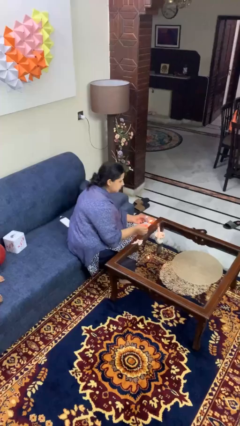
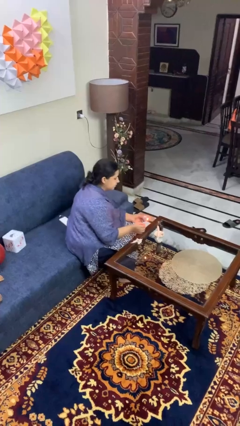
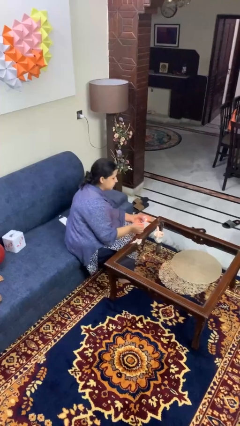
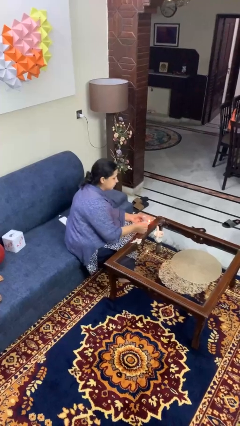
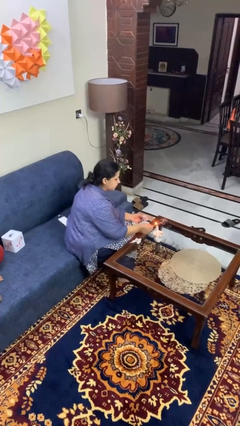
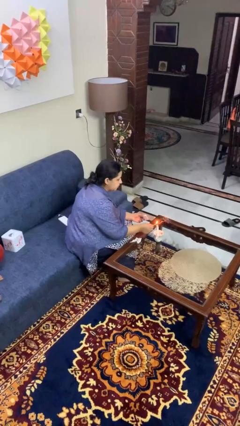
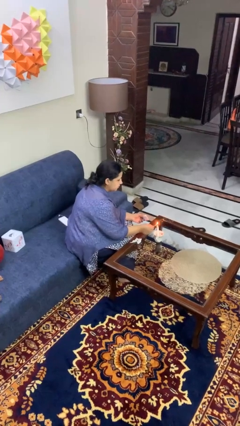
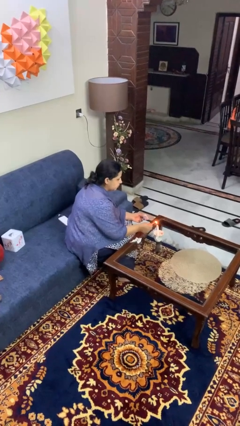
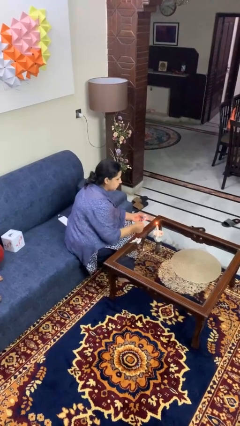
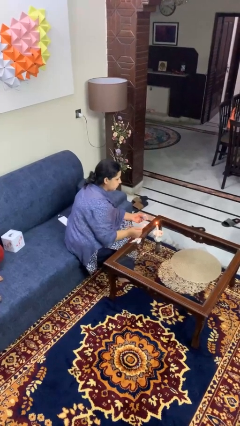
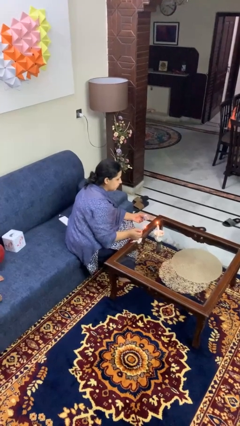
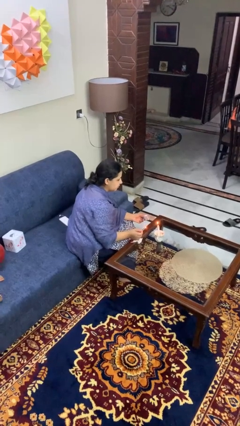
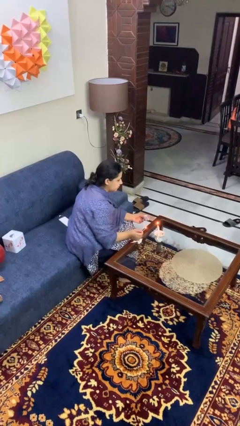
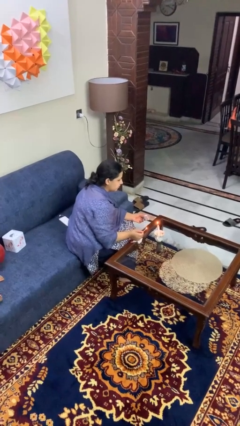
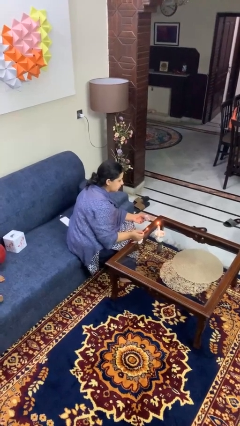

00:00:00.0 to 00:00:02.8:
person lights candle

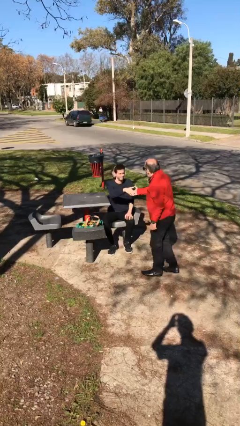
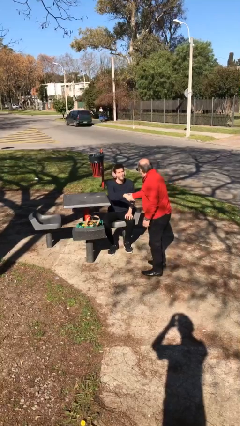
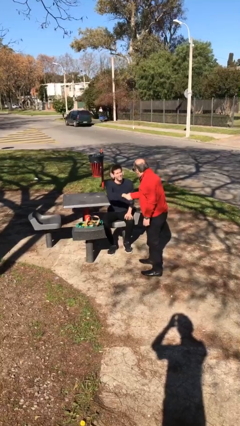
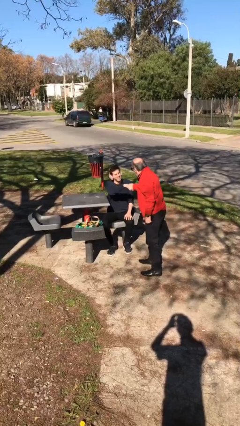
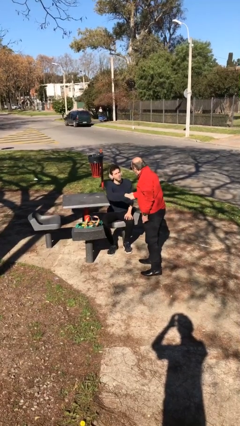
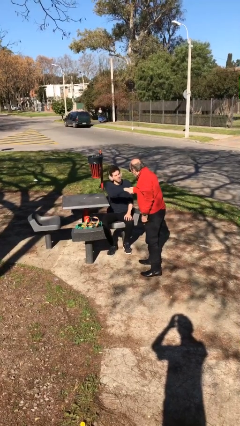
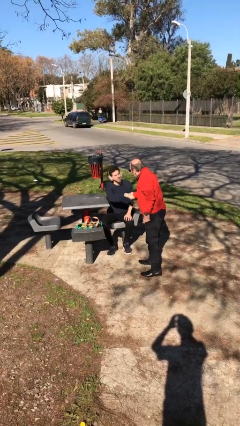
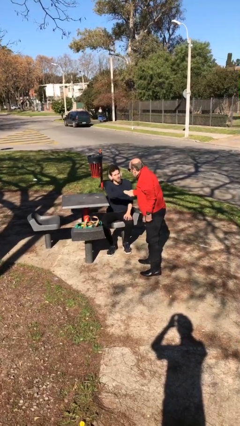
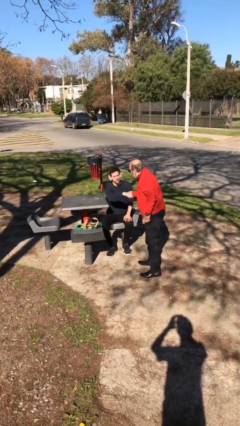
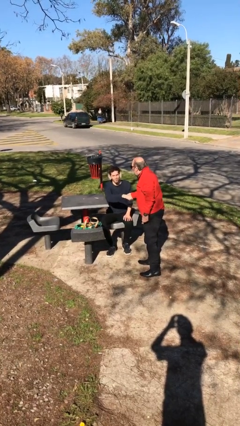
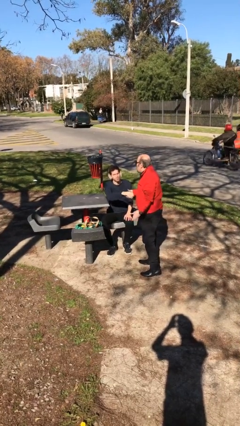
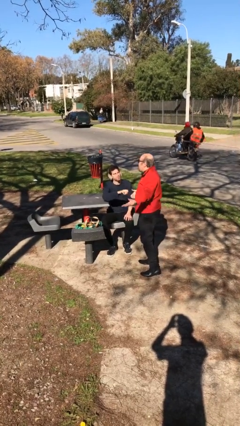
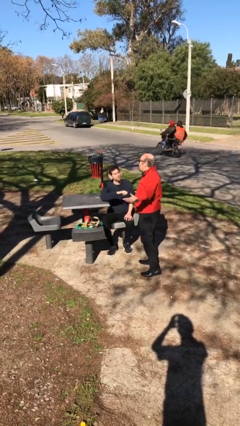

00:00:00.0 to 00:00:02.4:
person shakes hand

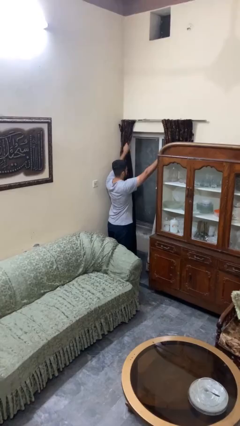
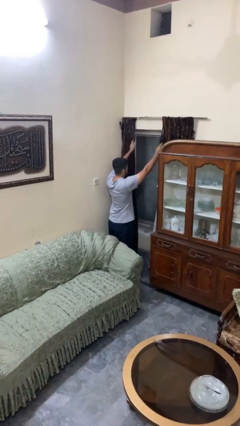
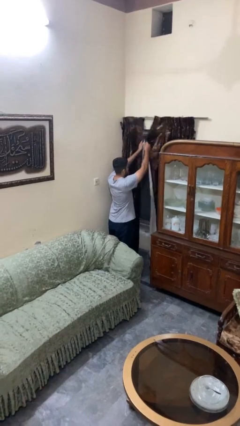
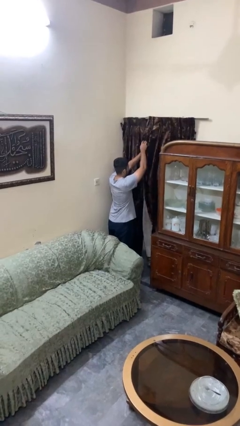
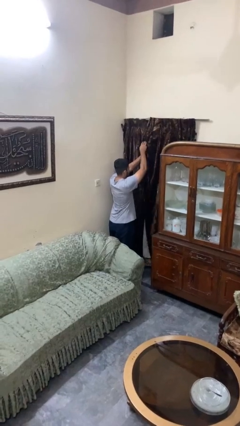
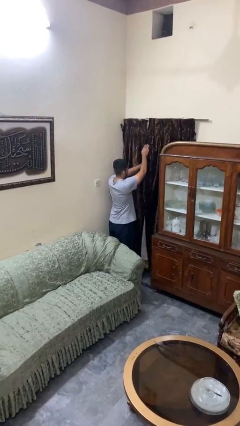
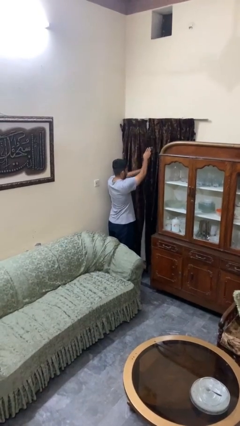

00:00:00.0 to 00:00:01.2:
person closes curtains

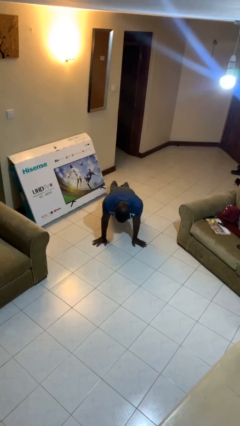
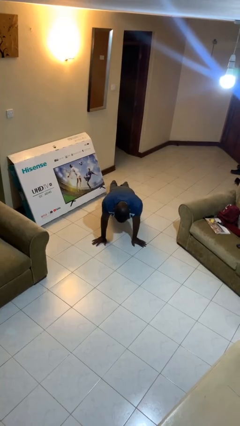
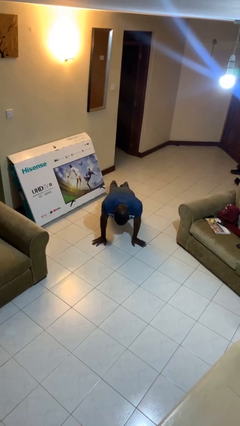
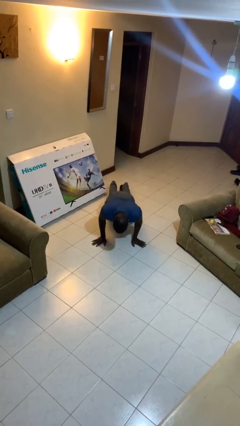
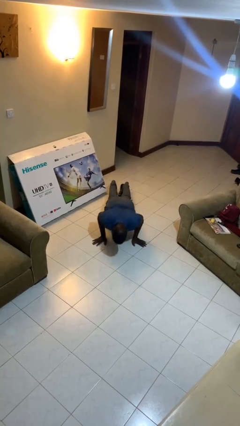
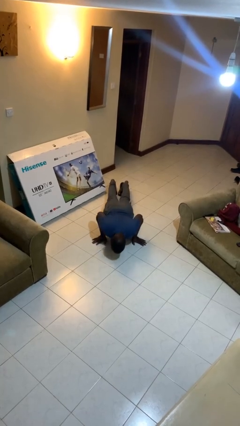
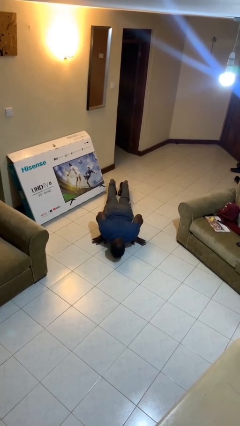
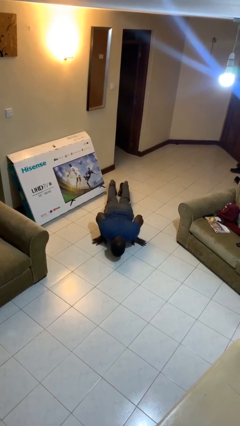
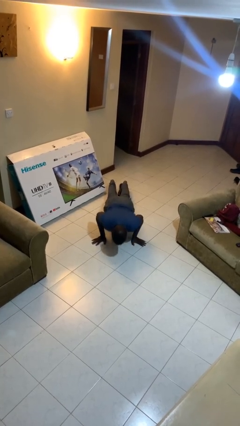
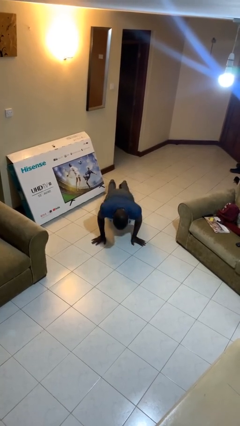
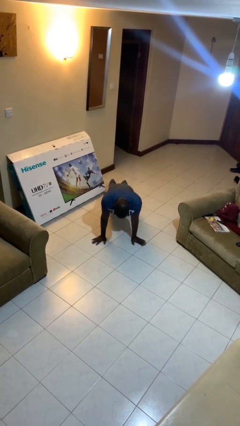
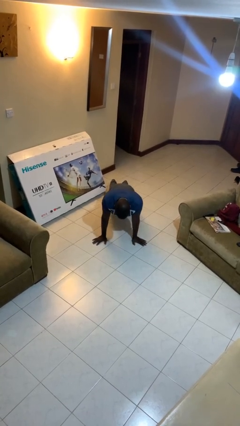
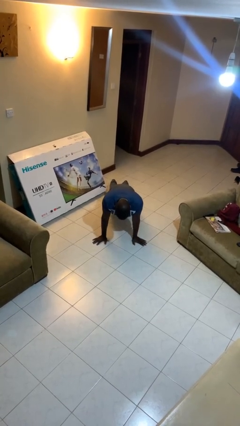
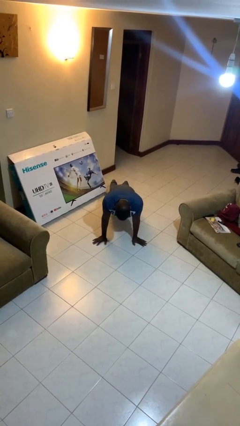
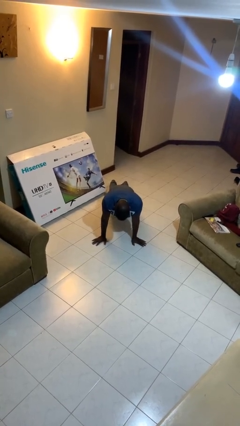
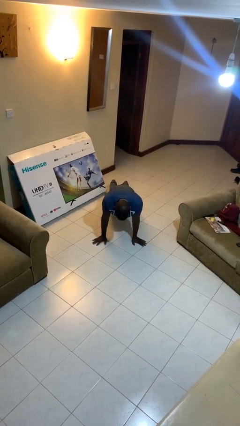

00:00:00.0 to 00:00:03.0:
person exercises with pushup

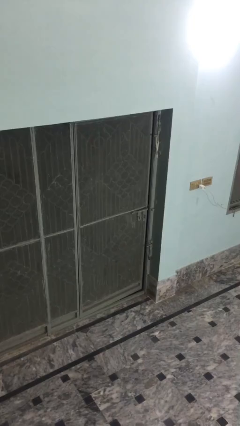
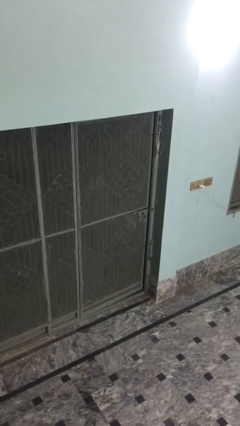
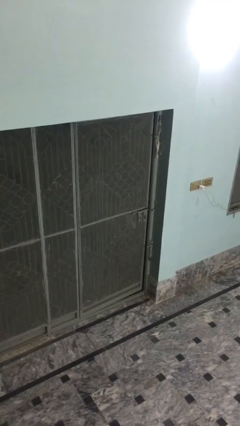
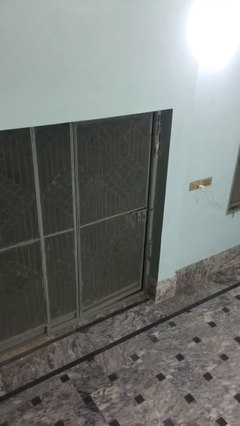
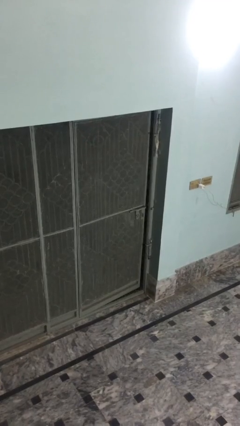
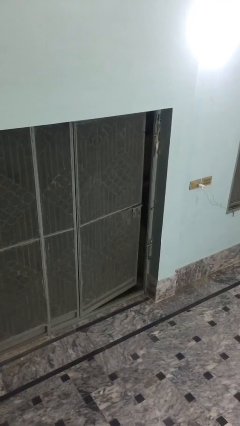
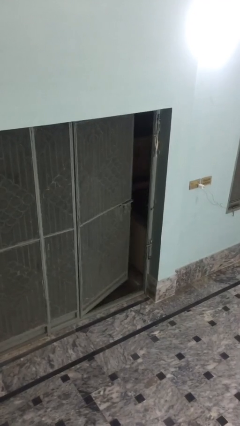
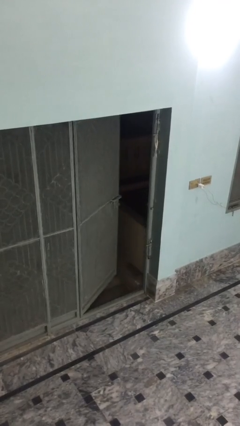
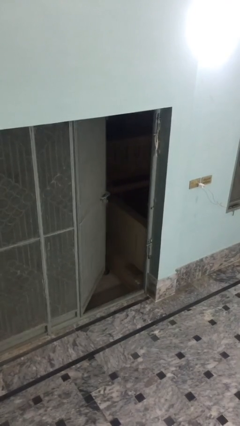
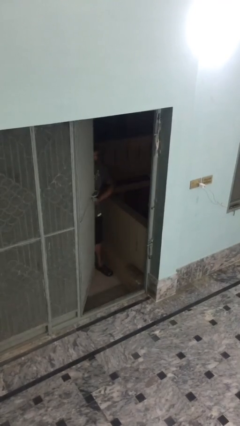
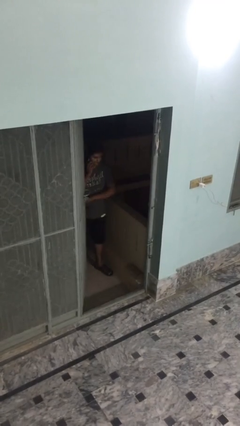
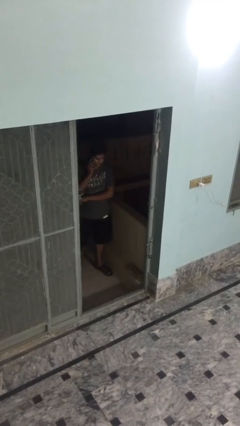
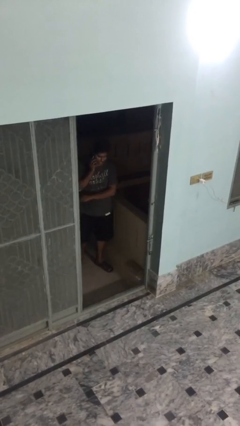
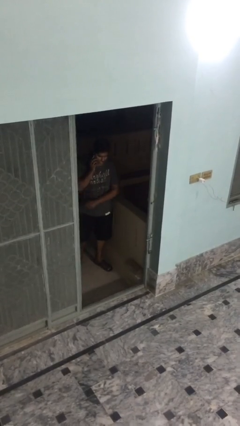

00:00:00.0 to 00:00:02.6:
person opens facility door

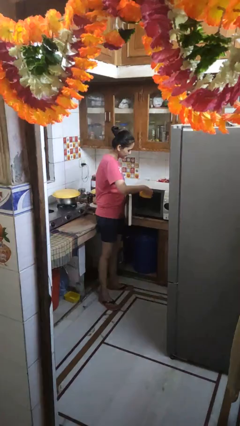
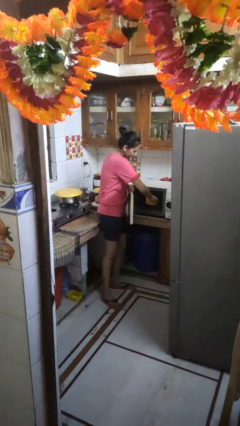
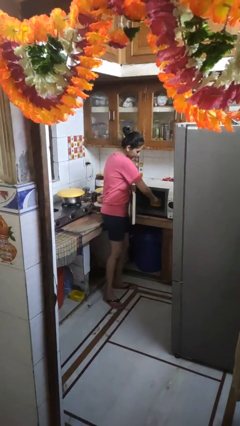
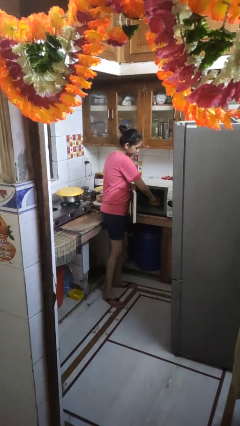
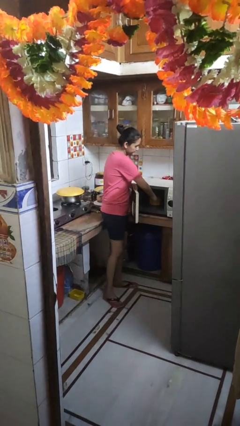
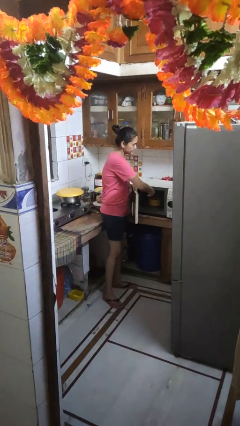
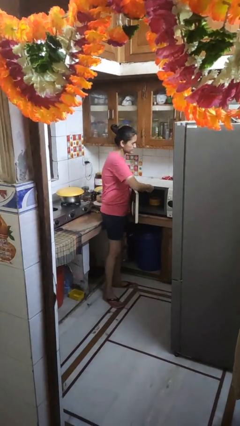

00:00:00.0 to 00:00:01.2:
person puts object into microwave

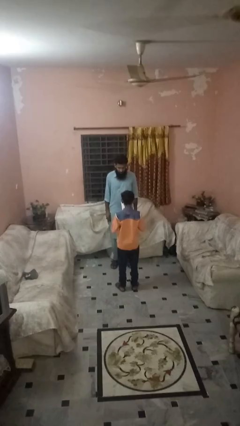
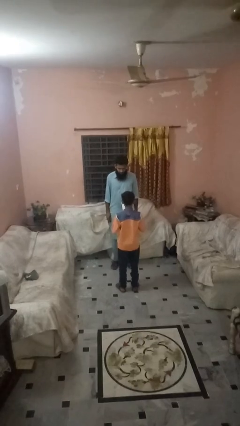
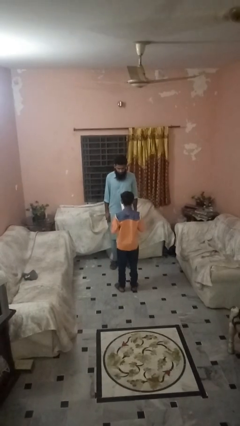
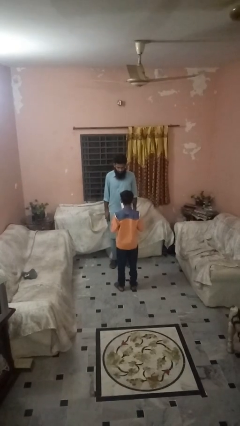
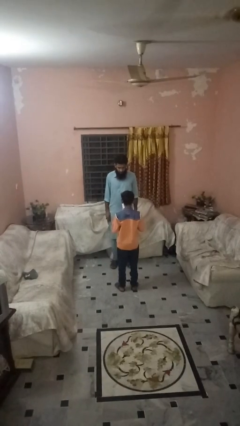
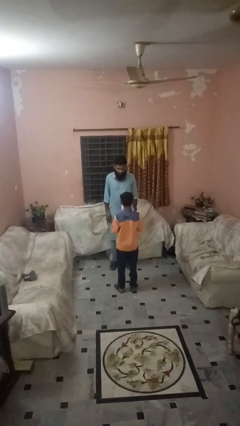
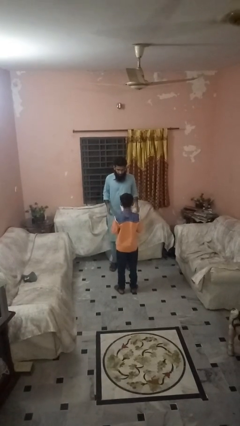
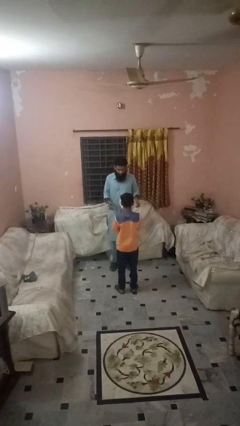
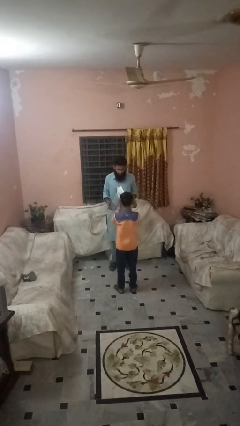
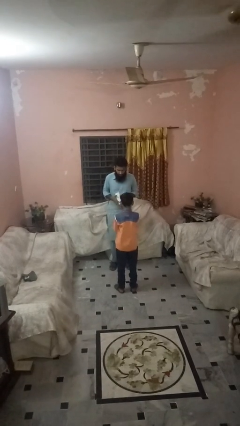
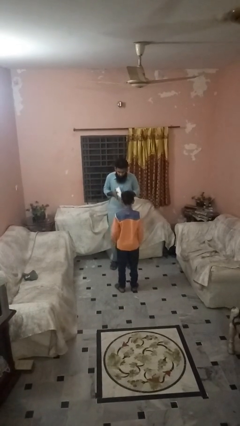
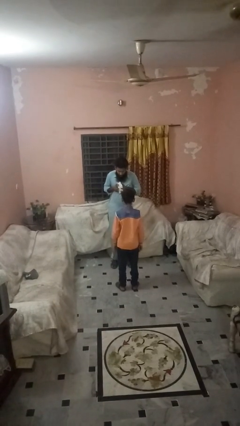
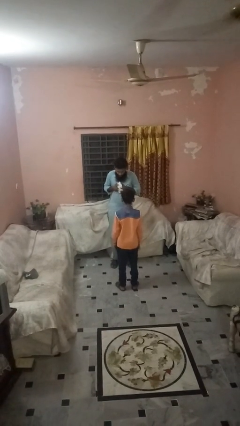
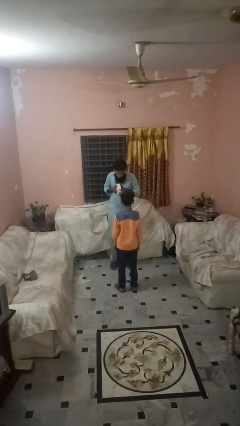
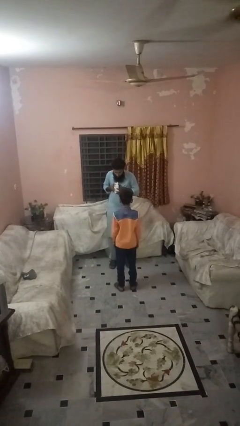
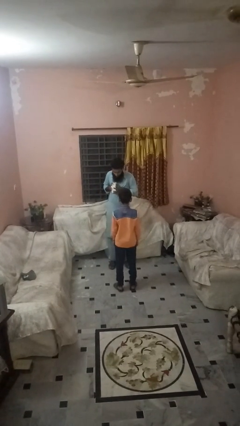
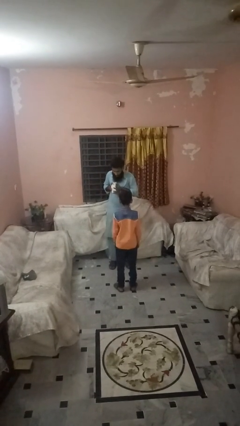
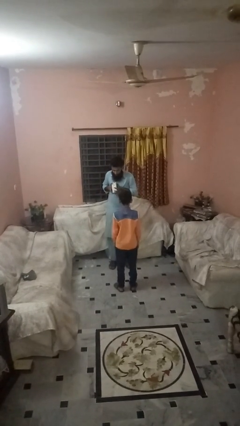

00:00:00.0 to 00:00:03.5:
person catches object from person

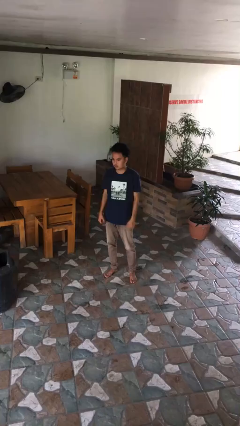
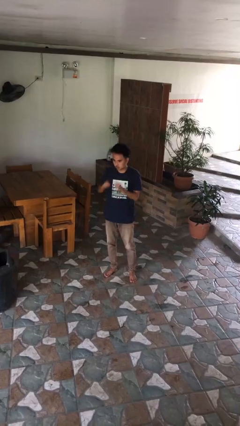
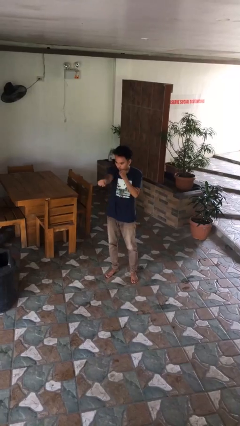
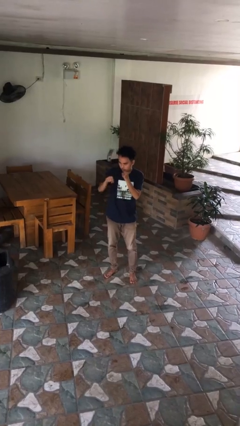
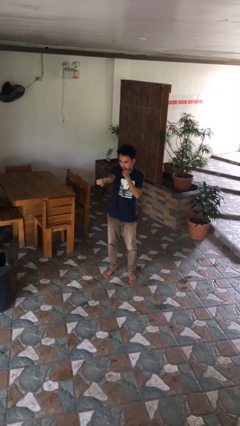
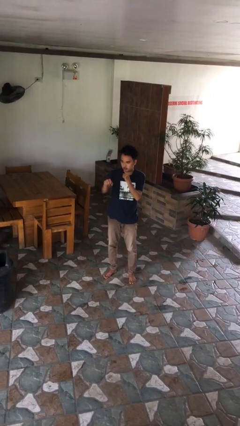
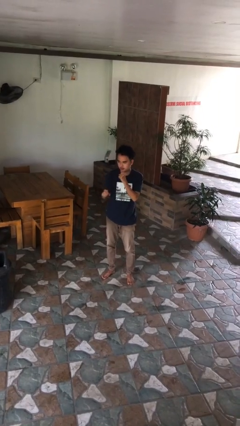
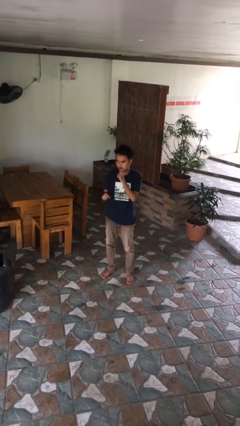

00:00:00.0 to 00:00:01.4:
person punches
